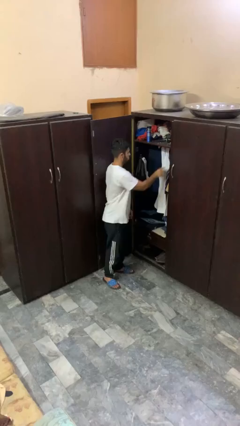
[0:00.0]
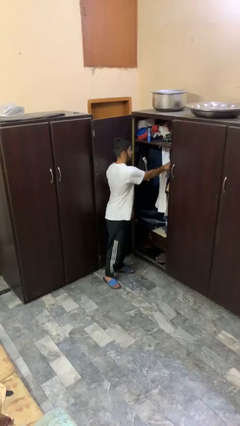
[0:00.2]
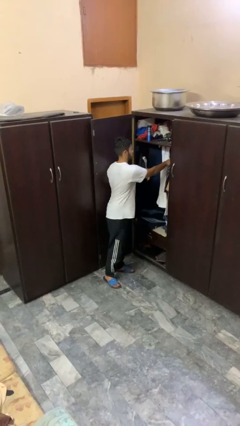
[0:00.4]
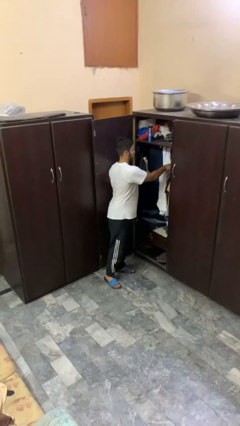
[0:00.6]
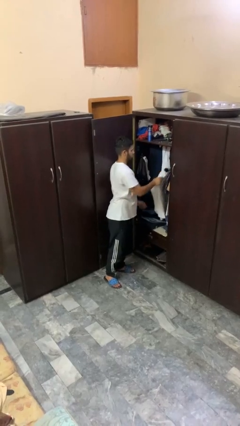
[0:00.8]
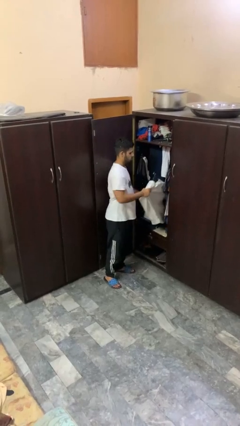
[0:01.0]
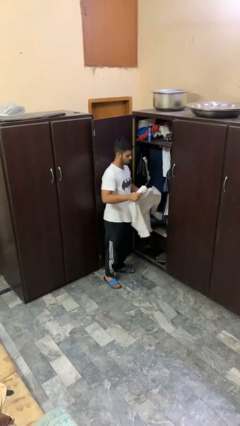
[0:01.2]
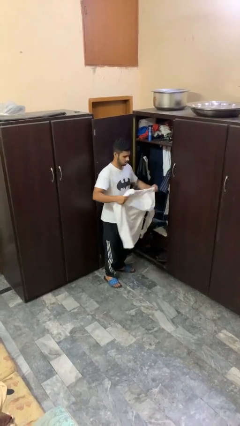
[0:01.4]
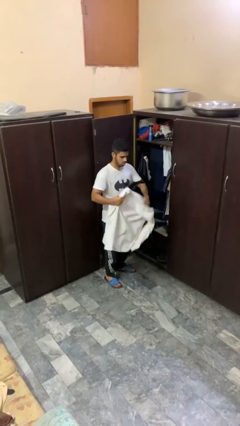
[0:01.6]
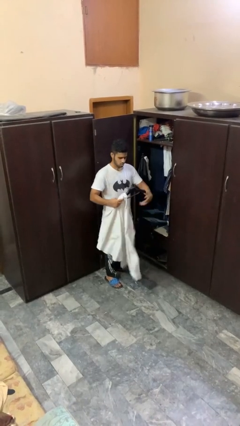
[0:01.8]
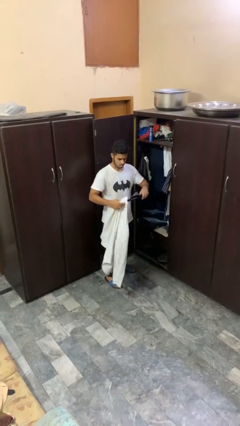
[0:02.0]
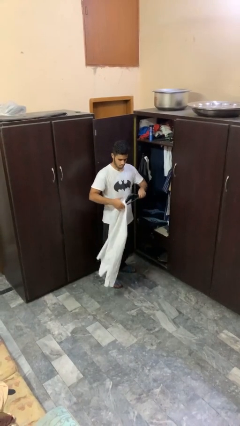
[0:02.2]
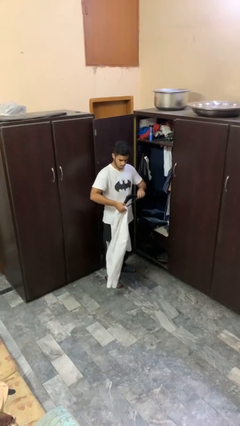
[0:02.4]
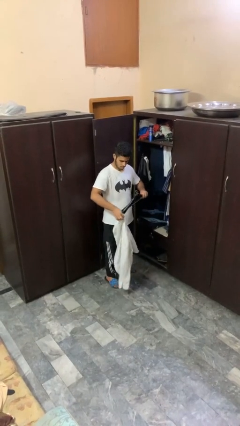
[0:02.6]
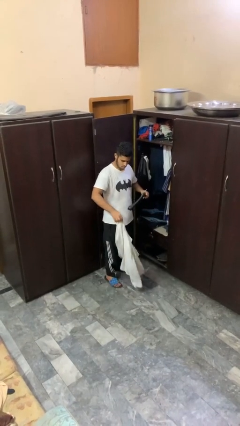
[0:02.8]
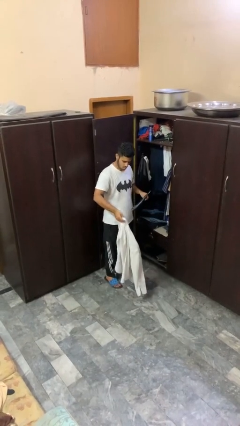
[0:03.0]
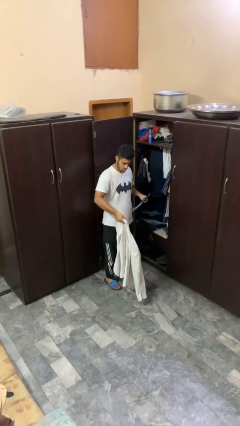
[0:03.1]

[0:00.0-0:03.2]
person takes clothes from closet

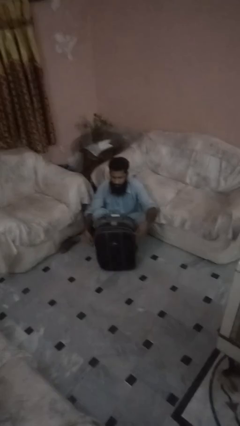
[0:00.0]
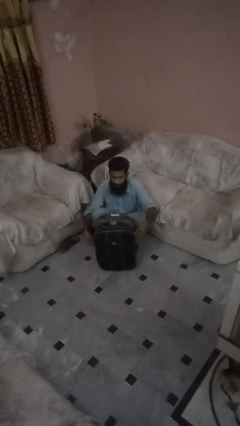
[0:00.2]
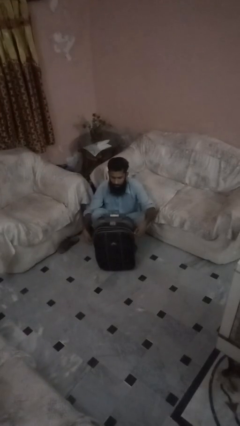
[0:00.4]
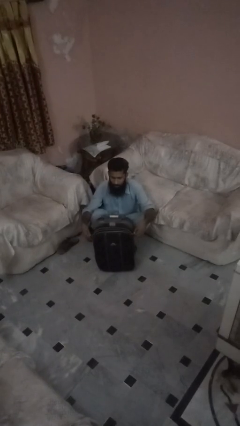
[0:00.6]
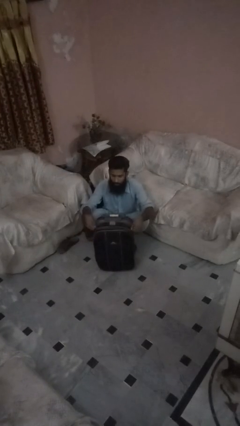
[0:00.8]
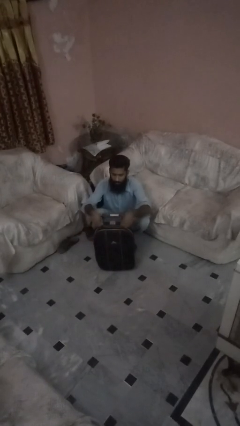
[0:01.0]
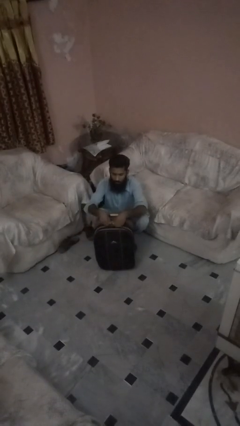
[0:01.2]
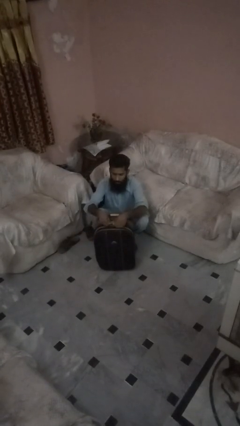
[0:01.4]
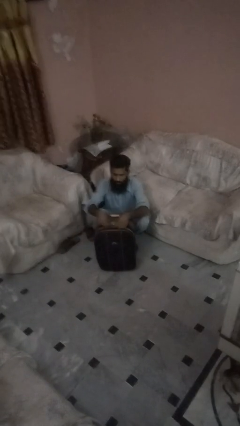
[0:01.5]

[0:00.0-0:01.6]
person closes suitcase

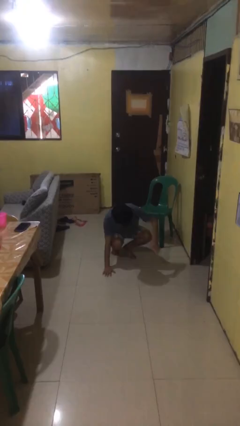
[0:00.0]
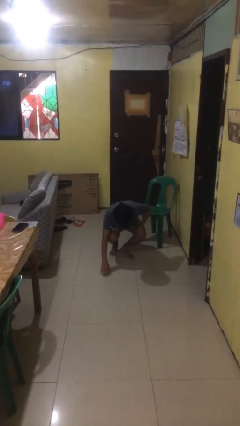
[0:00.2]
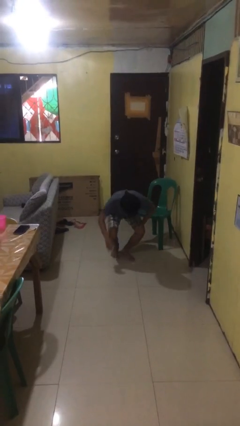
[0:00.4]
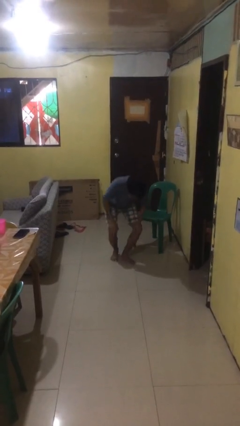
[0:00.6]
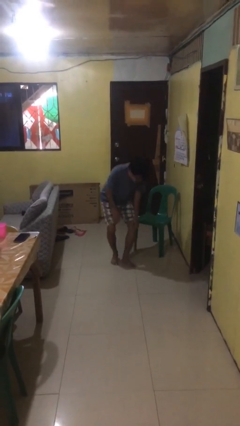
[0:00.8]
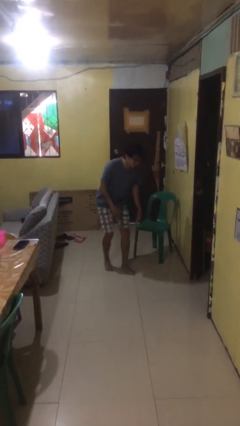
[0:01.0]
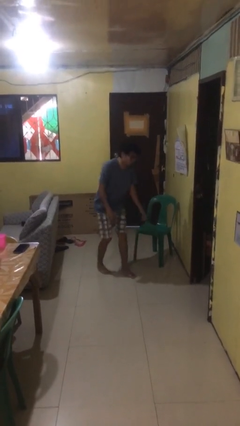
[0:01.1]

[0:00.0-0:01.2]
person lies down on floor

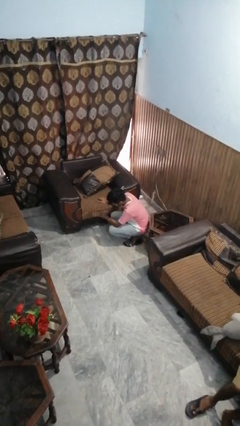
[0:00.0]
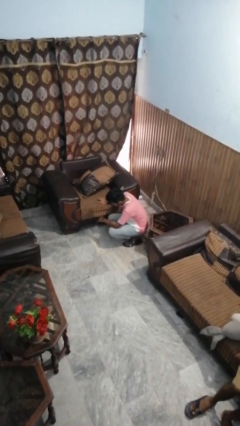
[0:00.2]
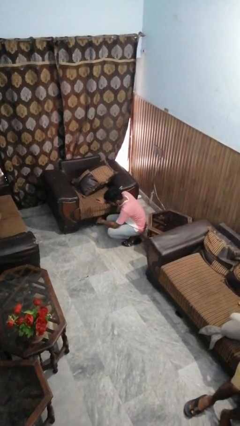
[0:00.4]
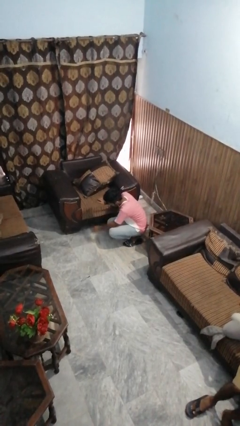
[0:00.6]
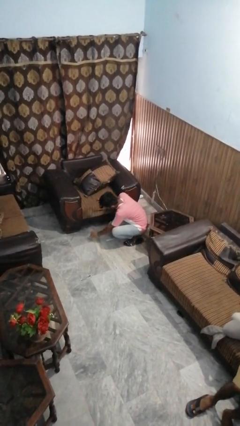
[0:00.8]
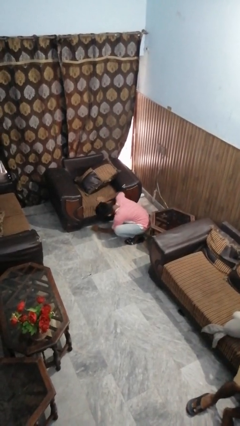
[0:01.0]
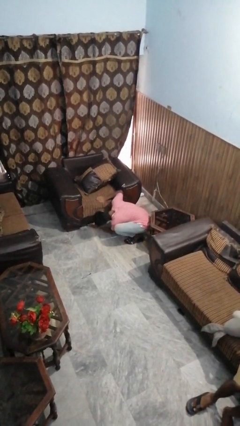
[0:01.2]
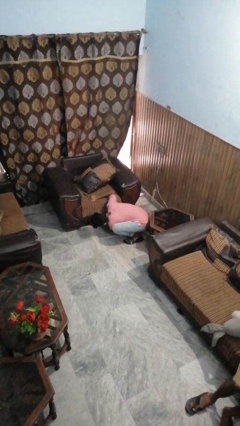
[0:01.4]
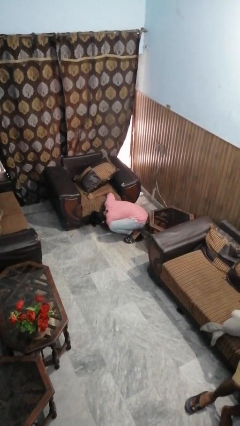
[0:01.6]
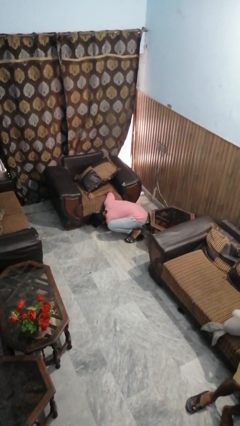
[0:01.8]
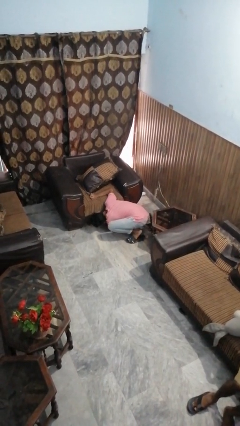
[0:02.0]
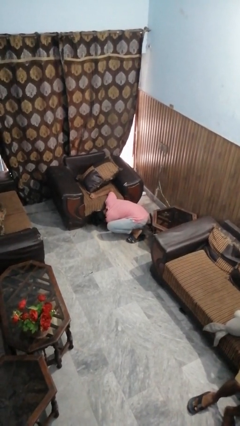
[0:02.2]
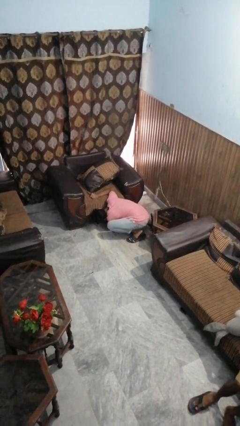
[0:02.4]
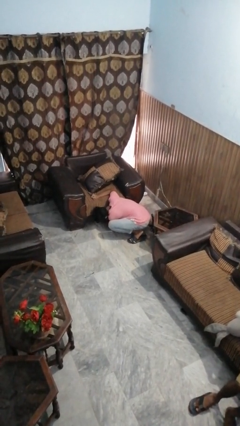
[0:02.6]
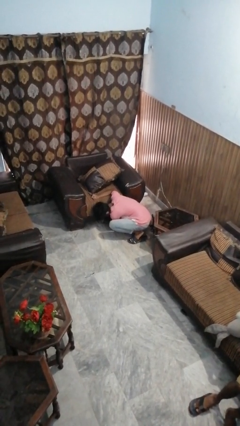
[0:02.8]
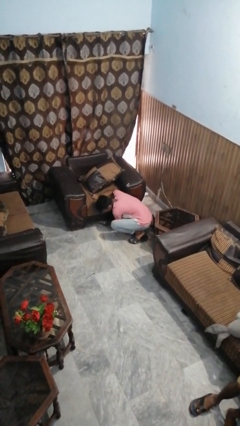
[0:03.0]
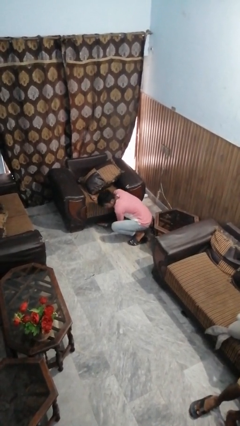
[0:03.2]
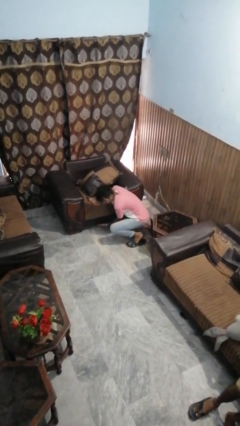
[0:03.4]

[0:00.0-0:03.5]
person searches under couch

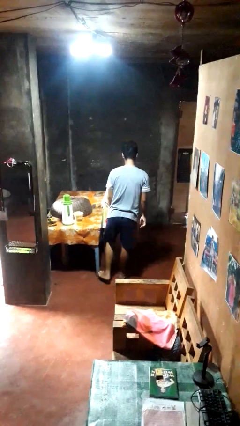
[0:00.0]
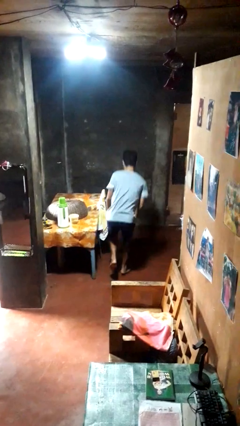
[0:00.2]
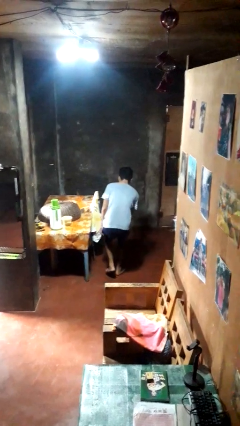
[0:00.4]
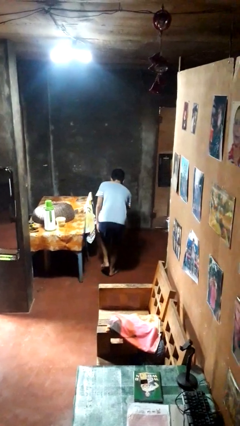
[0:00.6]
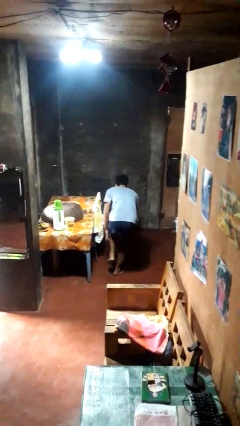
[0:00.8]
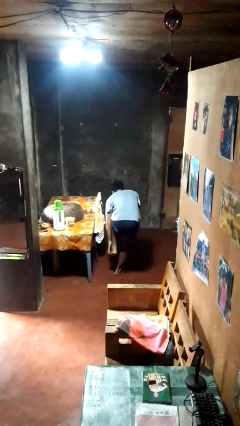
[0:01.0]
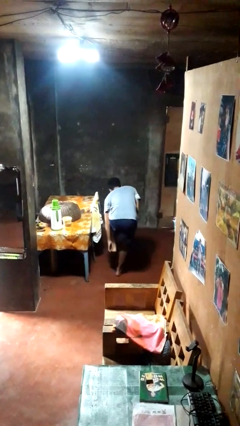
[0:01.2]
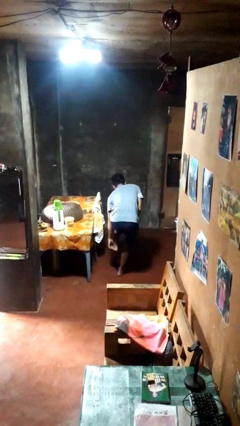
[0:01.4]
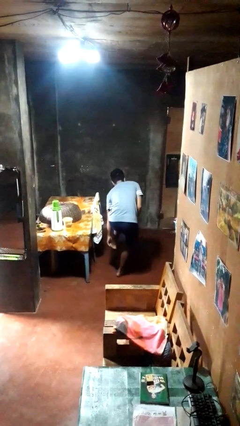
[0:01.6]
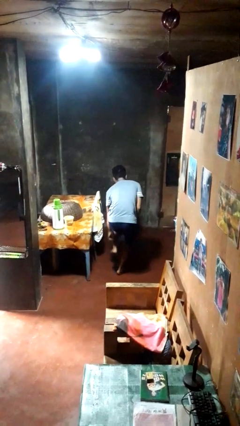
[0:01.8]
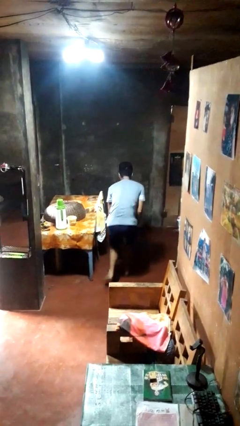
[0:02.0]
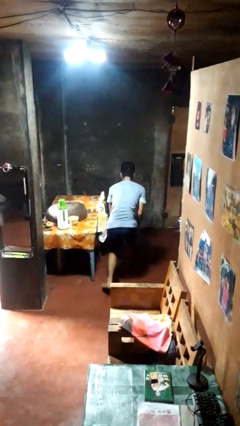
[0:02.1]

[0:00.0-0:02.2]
person bumps into table

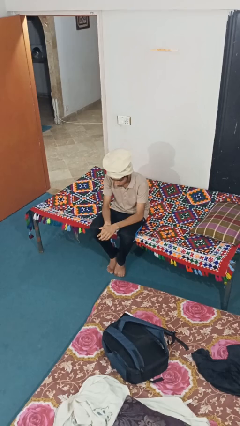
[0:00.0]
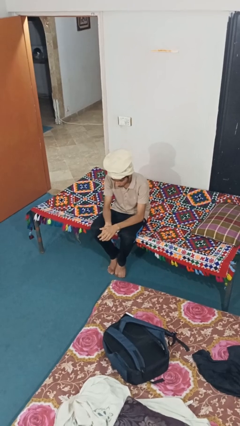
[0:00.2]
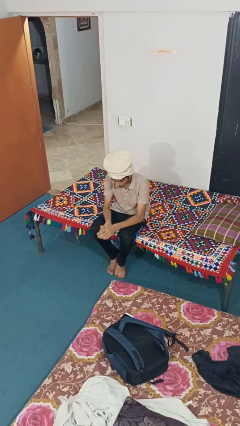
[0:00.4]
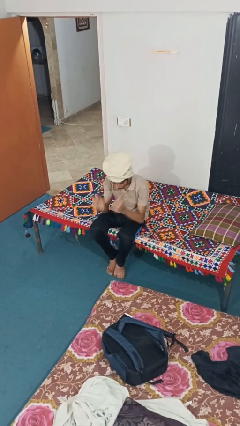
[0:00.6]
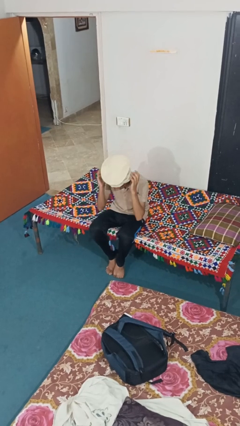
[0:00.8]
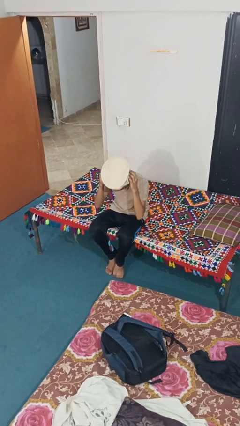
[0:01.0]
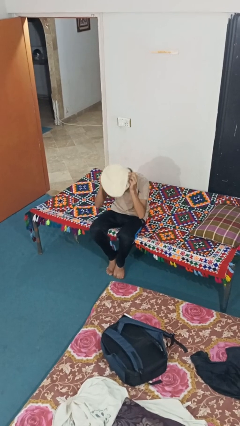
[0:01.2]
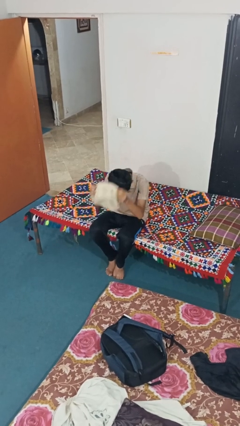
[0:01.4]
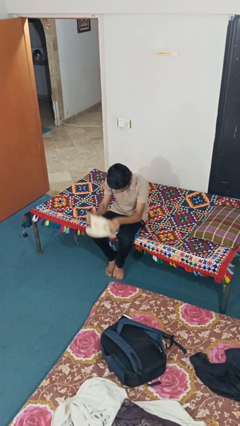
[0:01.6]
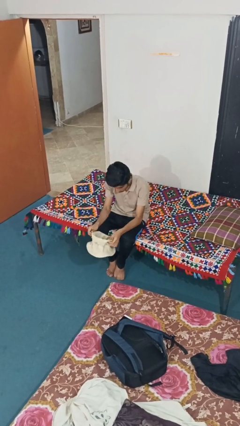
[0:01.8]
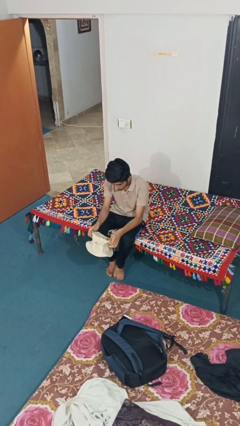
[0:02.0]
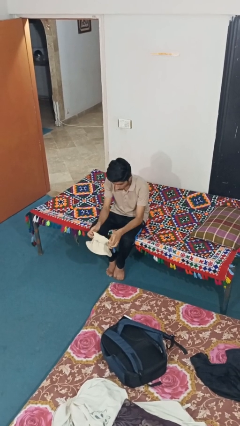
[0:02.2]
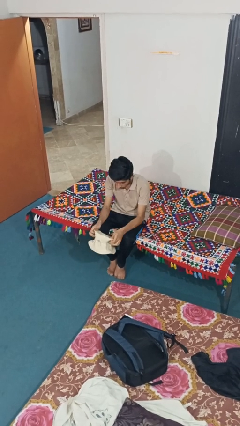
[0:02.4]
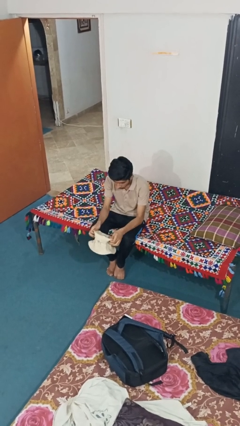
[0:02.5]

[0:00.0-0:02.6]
person takes off hat

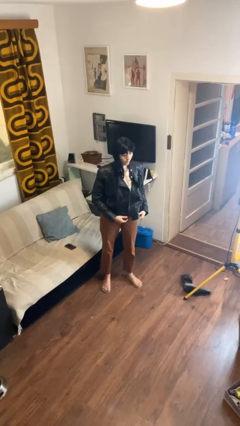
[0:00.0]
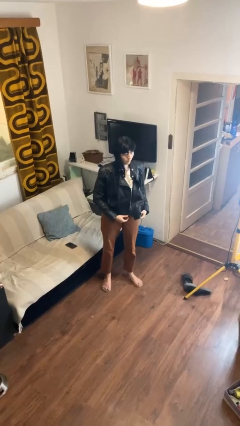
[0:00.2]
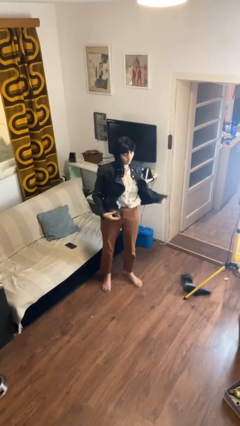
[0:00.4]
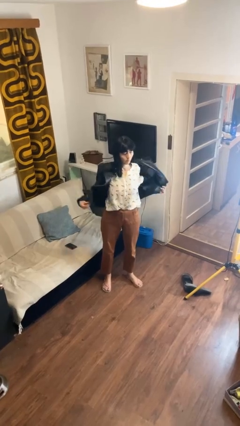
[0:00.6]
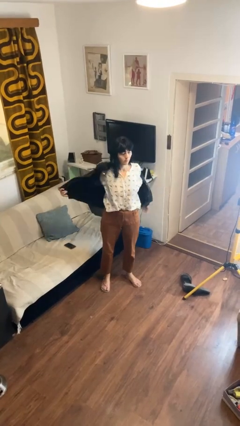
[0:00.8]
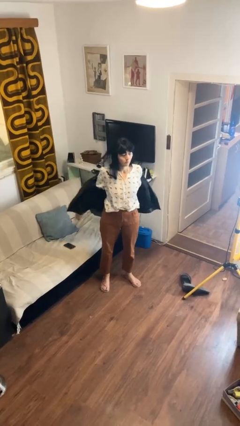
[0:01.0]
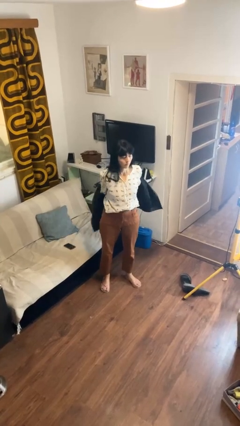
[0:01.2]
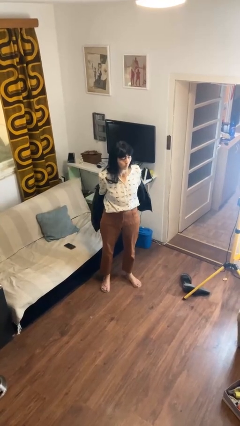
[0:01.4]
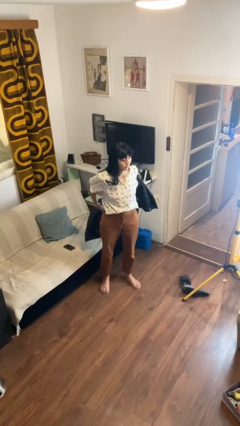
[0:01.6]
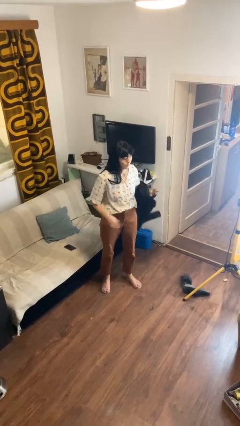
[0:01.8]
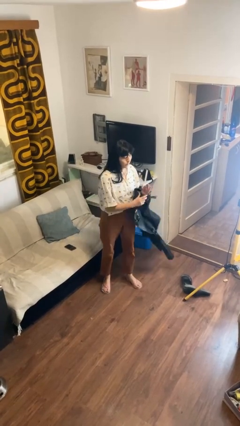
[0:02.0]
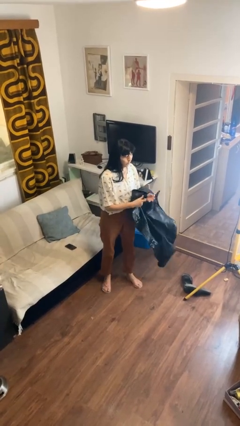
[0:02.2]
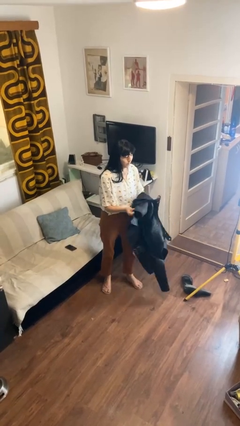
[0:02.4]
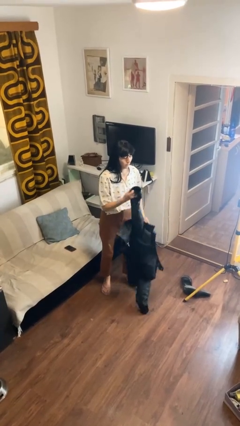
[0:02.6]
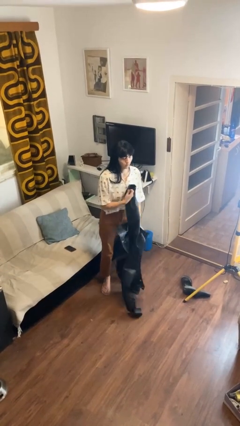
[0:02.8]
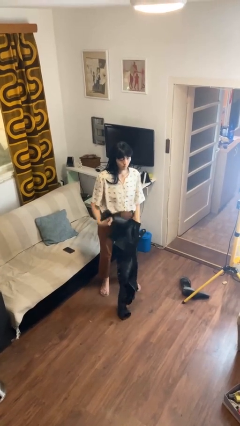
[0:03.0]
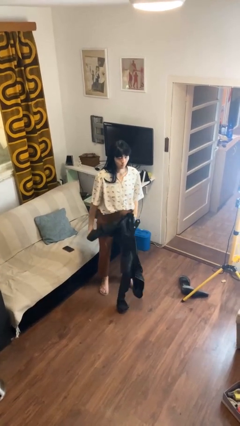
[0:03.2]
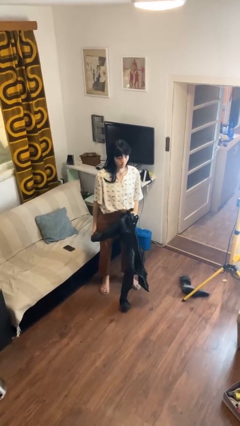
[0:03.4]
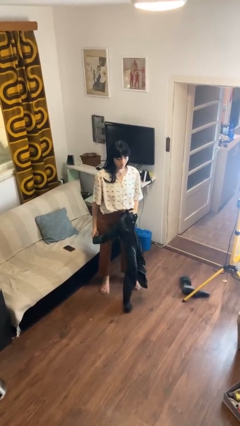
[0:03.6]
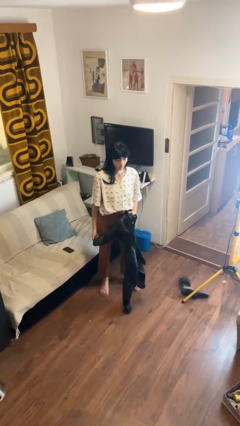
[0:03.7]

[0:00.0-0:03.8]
person takes off jacket
